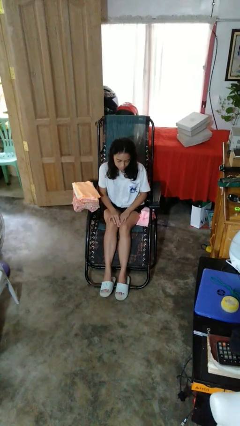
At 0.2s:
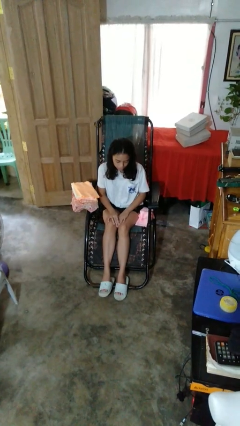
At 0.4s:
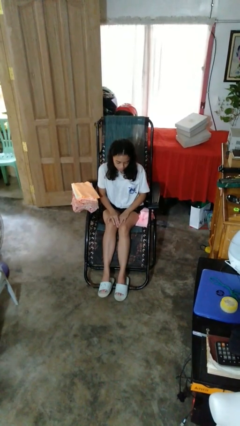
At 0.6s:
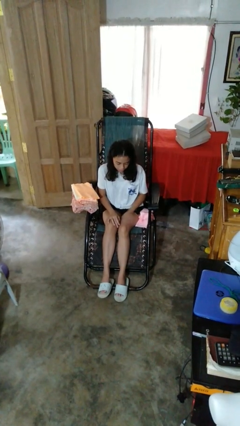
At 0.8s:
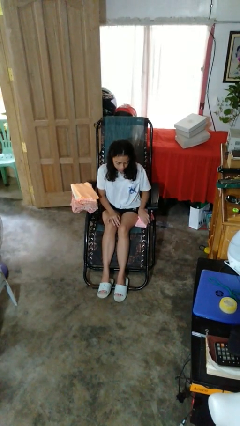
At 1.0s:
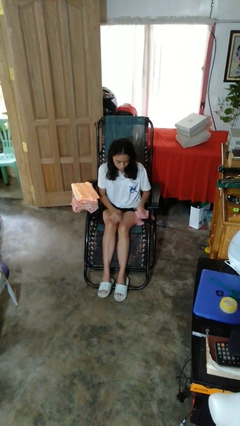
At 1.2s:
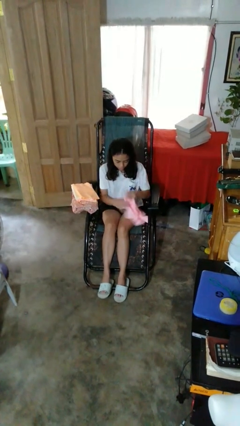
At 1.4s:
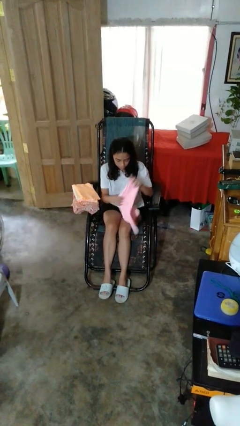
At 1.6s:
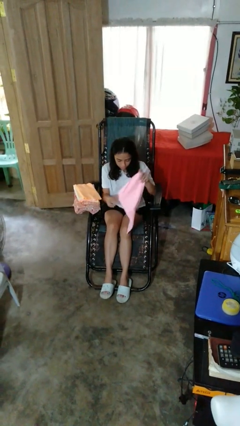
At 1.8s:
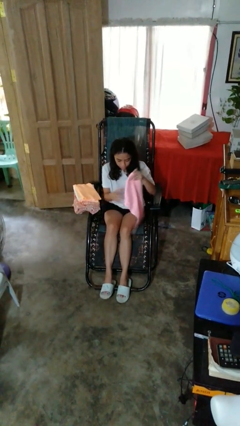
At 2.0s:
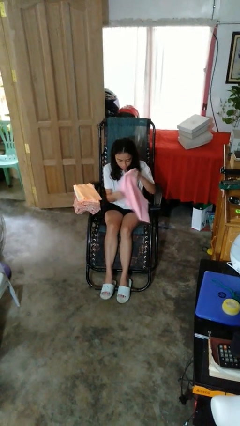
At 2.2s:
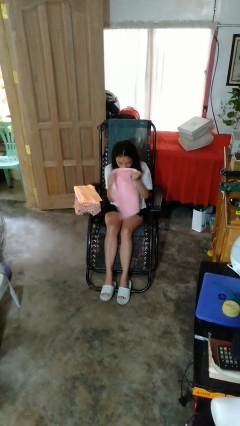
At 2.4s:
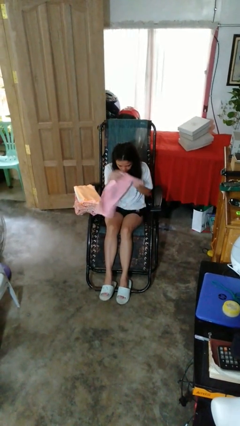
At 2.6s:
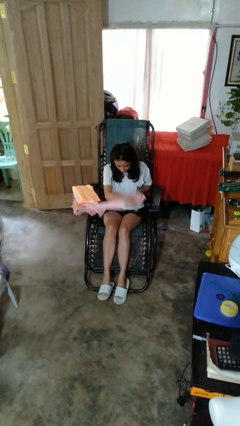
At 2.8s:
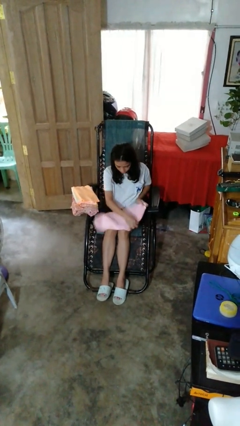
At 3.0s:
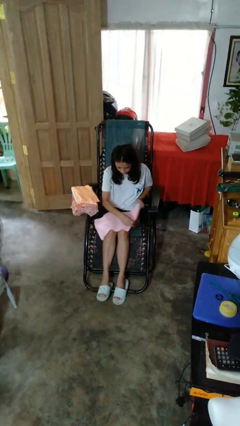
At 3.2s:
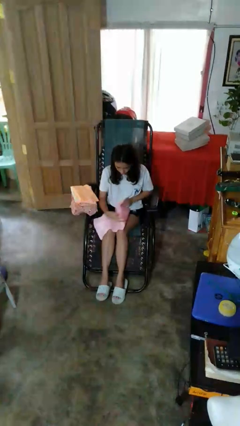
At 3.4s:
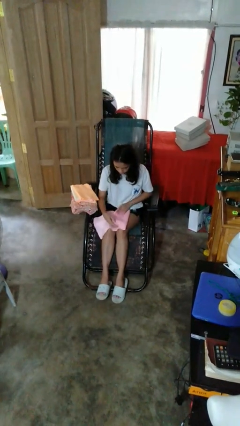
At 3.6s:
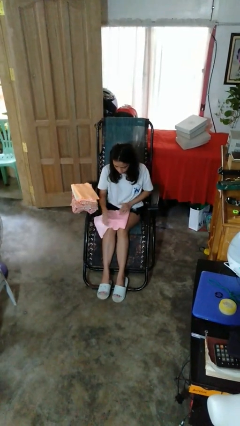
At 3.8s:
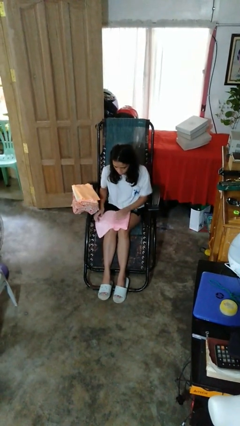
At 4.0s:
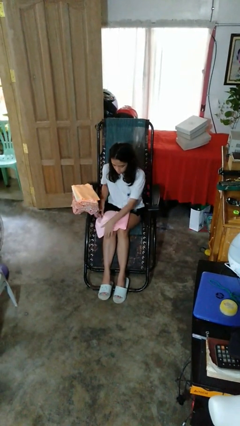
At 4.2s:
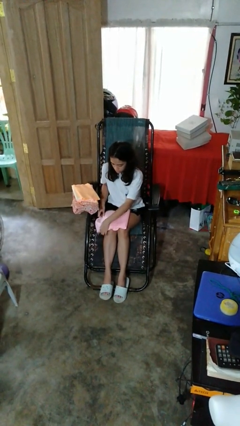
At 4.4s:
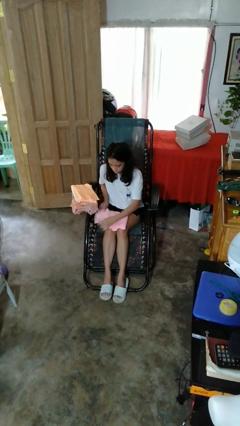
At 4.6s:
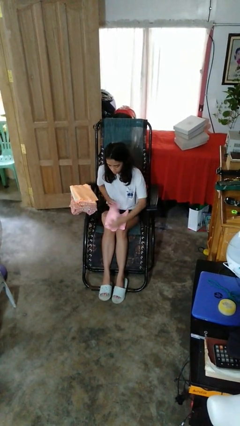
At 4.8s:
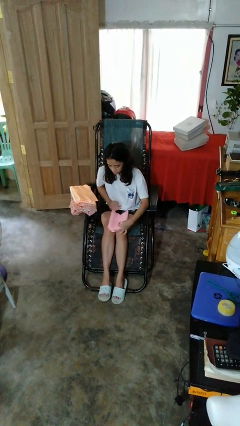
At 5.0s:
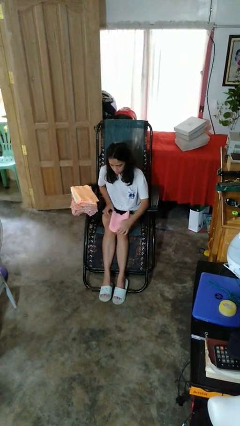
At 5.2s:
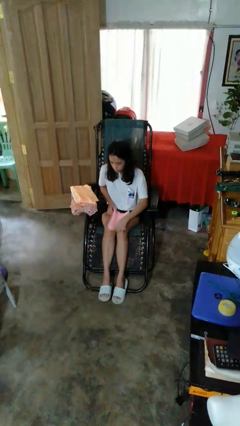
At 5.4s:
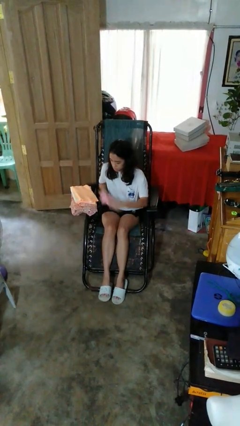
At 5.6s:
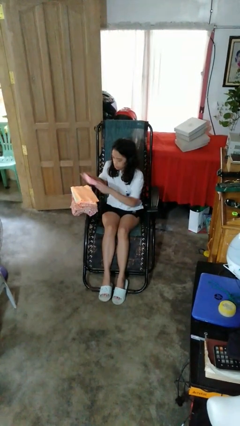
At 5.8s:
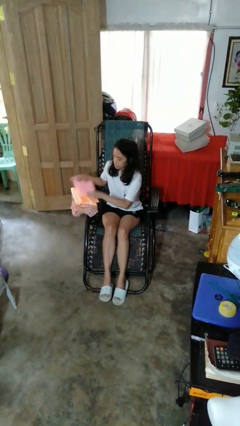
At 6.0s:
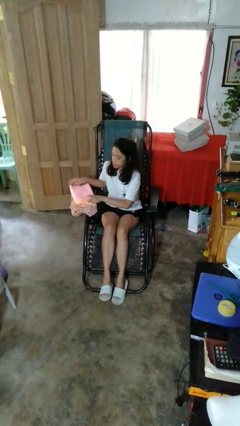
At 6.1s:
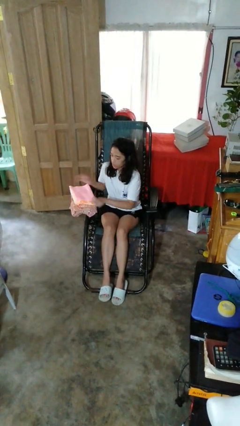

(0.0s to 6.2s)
person folds towel

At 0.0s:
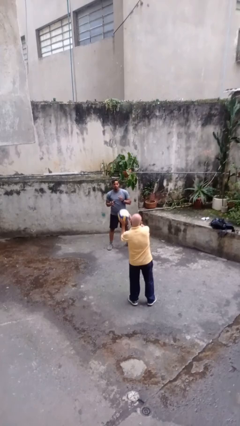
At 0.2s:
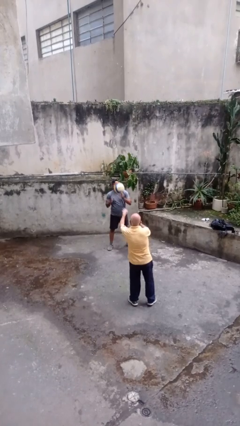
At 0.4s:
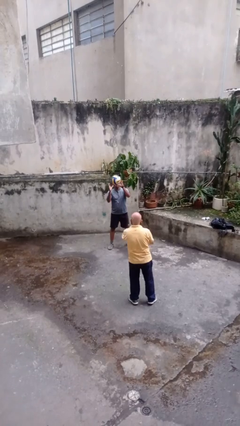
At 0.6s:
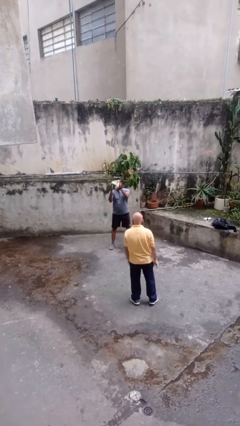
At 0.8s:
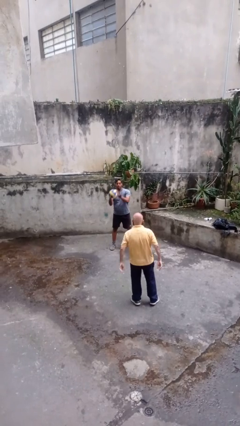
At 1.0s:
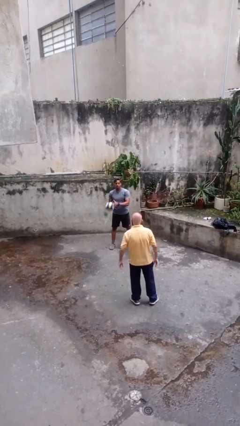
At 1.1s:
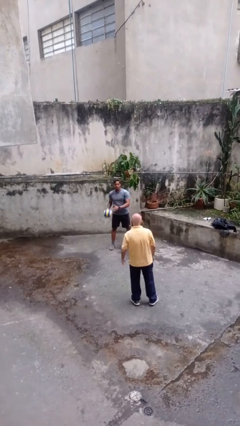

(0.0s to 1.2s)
person catches object from person

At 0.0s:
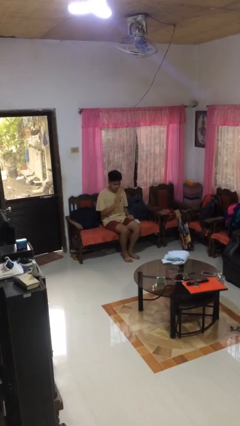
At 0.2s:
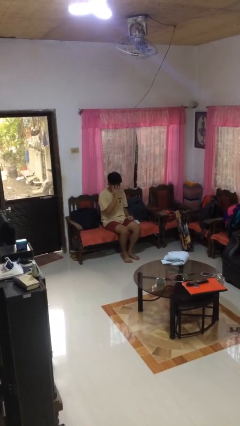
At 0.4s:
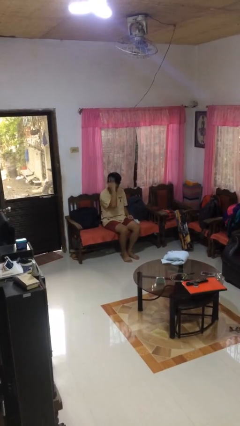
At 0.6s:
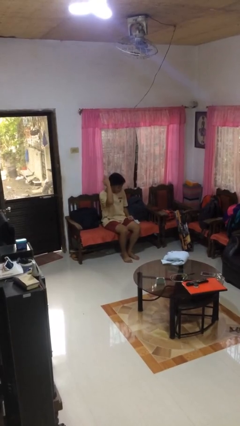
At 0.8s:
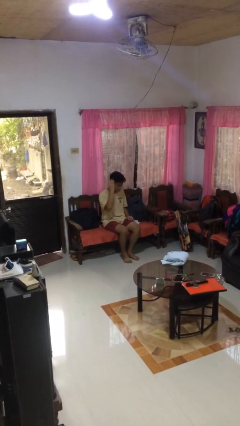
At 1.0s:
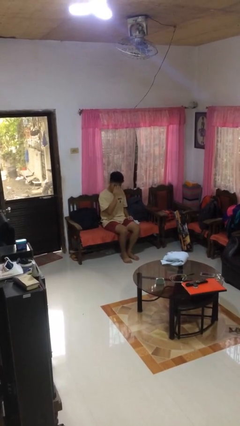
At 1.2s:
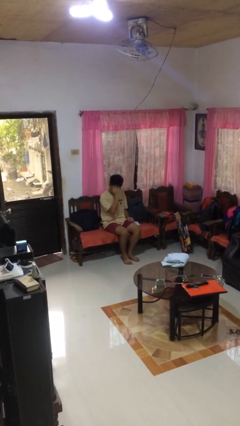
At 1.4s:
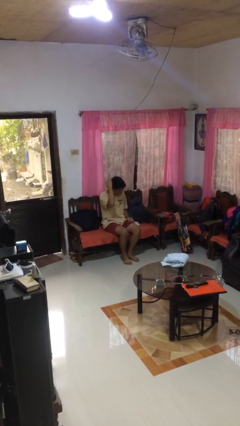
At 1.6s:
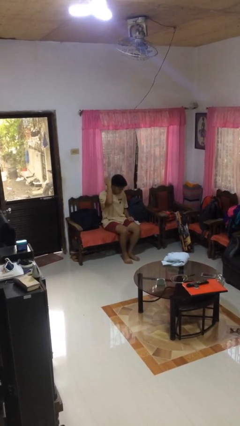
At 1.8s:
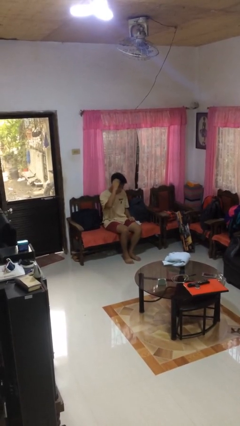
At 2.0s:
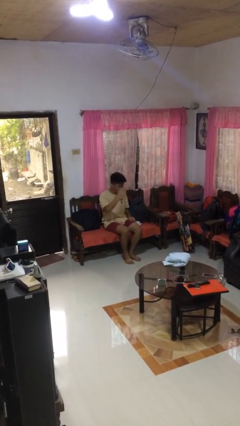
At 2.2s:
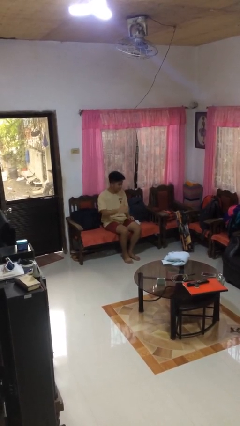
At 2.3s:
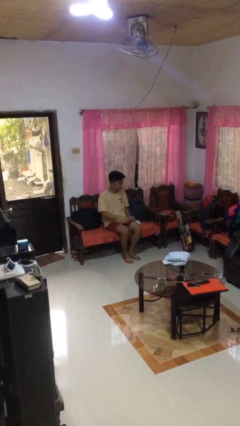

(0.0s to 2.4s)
person strokes hair

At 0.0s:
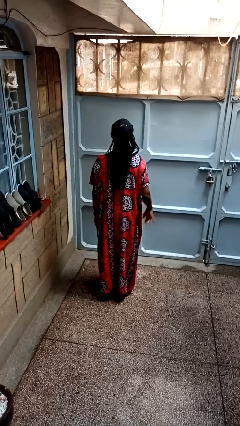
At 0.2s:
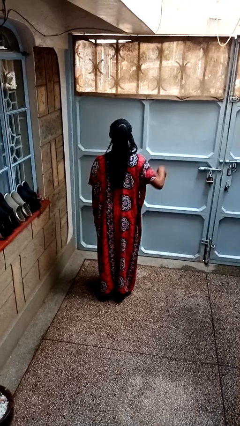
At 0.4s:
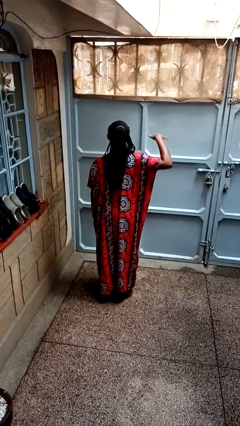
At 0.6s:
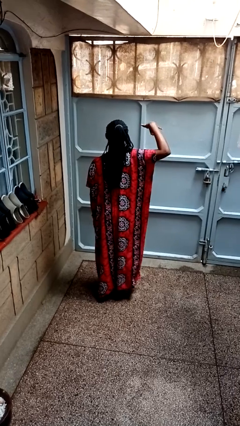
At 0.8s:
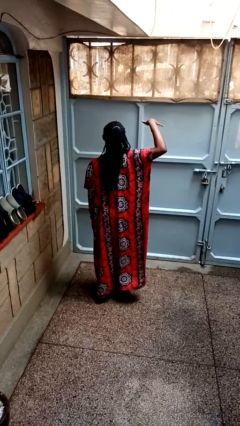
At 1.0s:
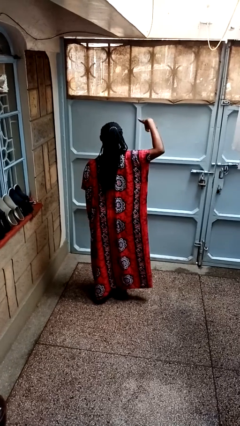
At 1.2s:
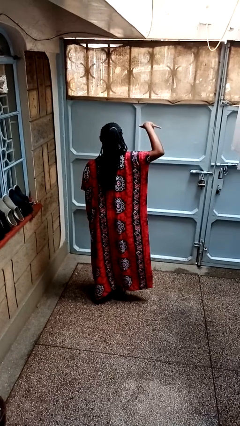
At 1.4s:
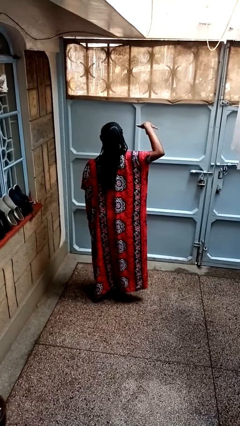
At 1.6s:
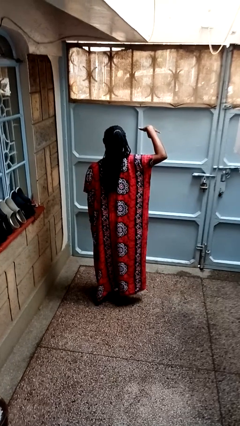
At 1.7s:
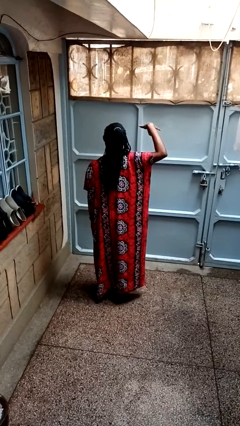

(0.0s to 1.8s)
person gestures hang loose

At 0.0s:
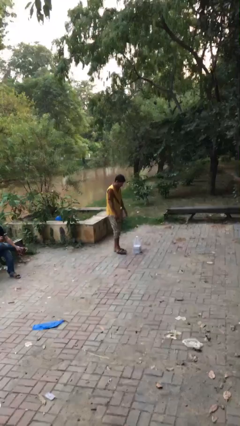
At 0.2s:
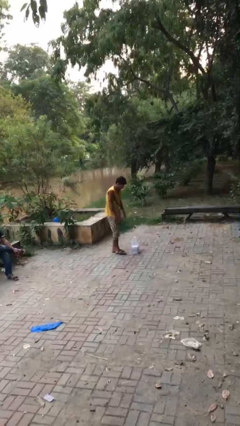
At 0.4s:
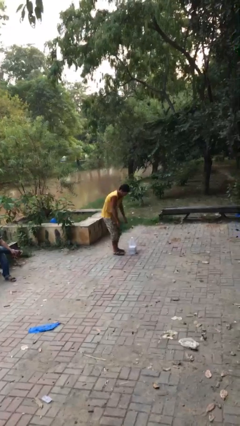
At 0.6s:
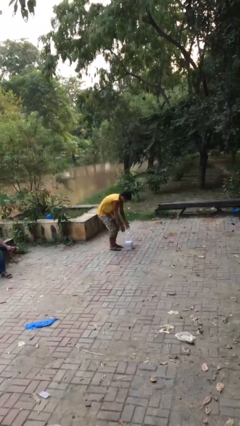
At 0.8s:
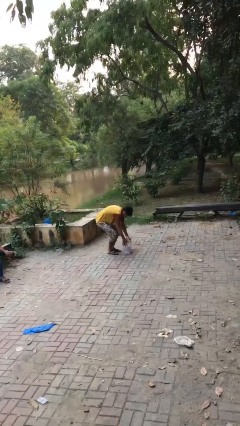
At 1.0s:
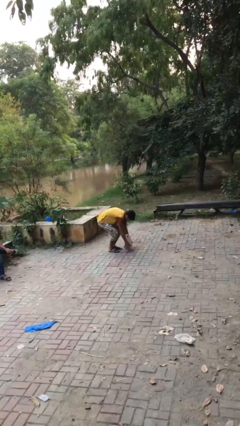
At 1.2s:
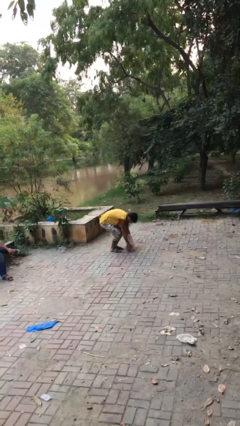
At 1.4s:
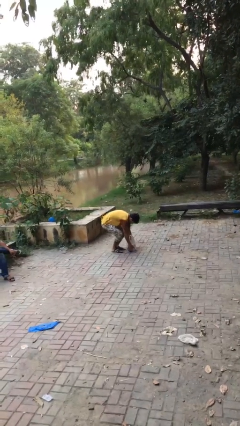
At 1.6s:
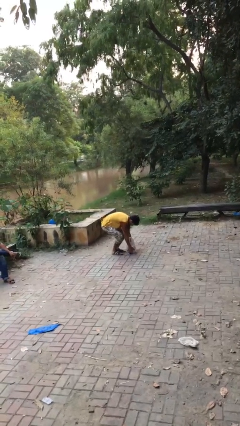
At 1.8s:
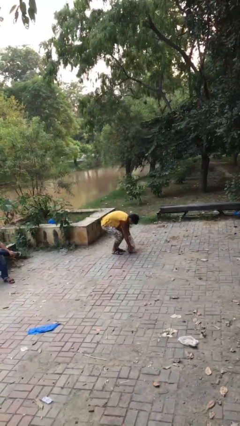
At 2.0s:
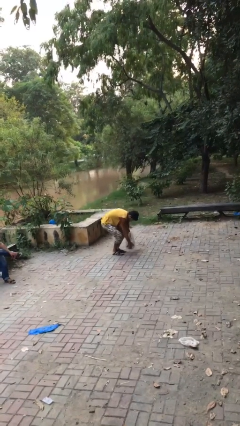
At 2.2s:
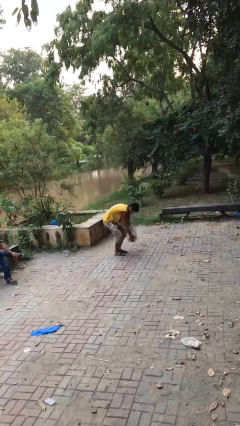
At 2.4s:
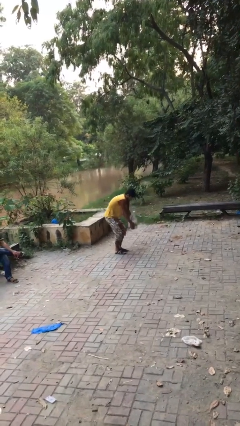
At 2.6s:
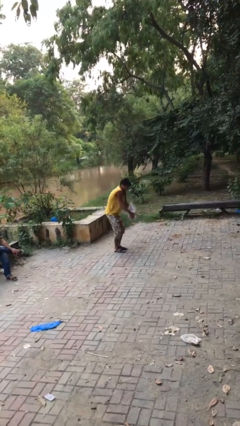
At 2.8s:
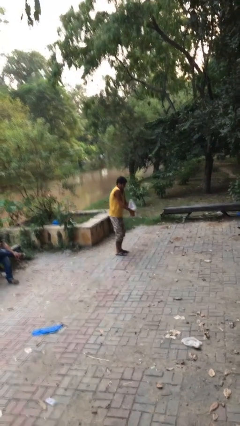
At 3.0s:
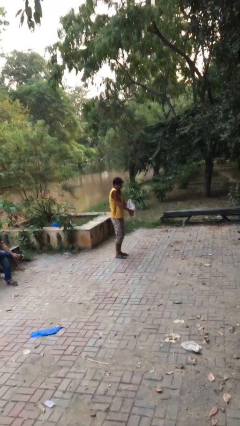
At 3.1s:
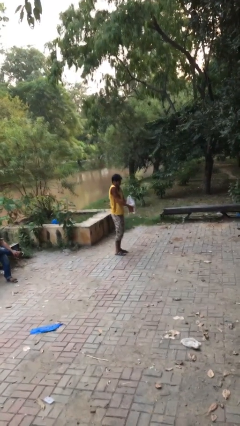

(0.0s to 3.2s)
person picks up object from floor

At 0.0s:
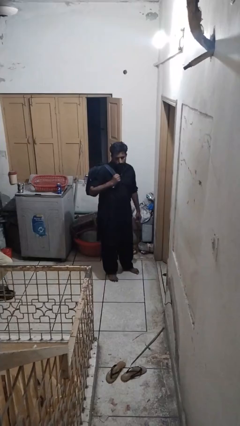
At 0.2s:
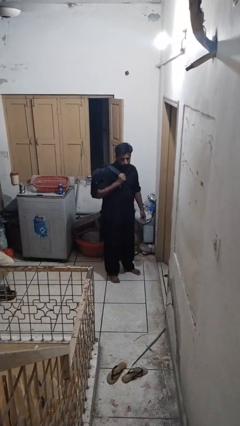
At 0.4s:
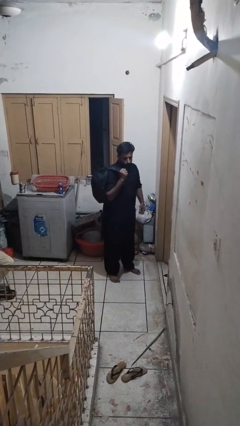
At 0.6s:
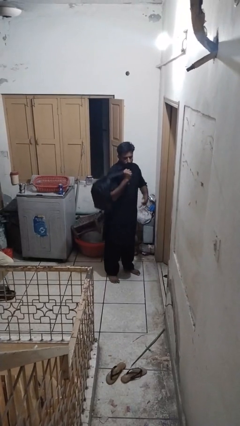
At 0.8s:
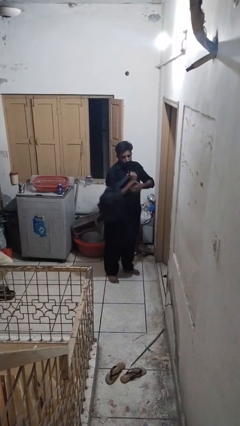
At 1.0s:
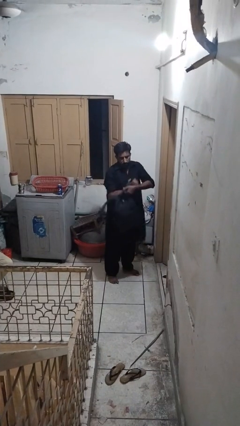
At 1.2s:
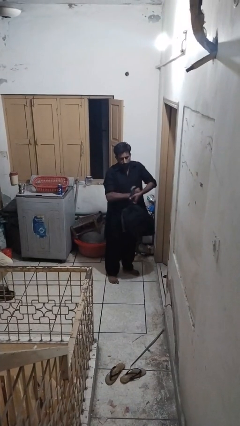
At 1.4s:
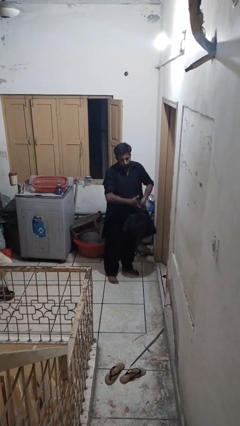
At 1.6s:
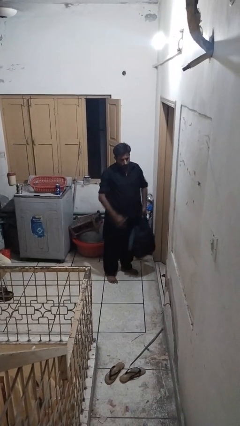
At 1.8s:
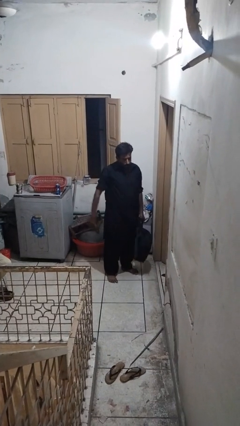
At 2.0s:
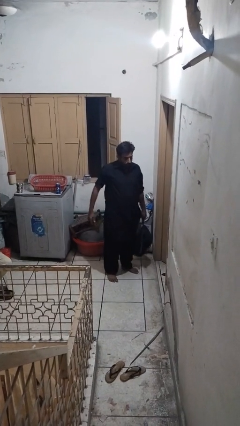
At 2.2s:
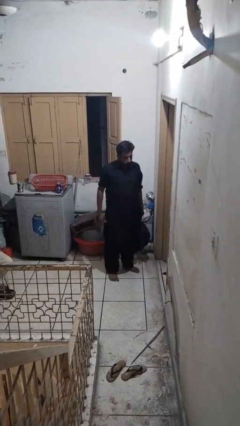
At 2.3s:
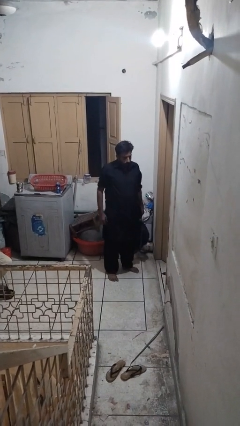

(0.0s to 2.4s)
person takes off backpack

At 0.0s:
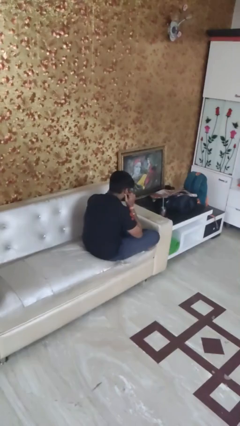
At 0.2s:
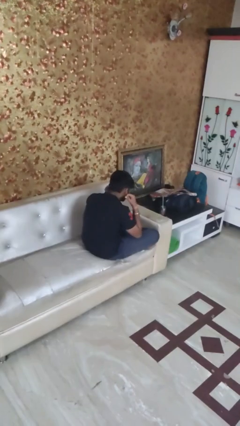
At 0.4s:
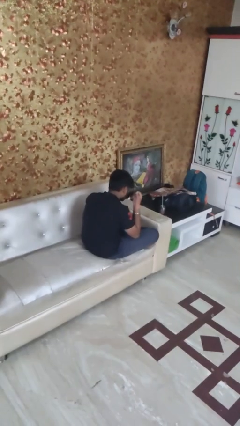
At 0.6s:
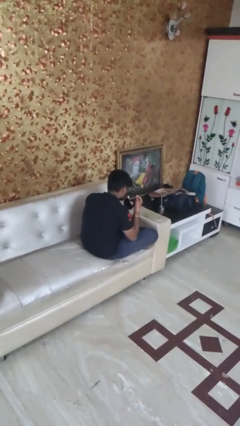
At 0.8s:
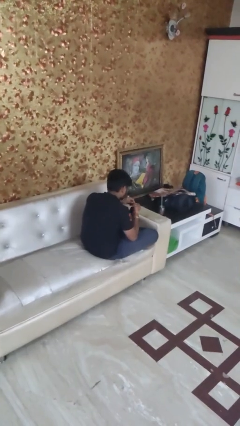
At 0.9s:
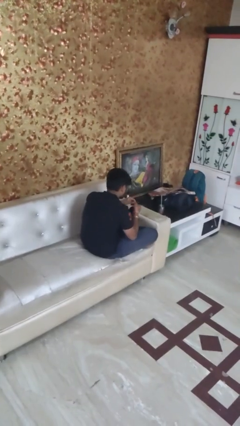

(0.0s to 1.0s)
person takes off facemask
